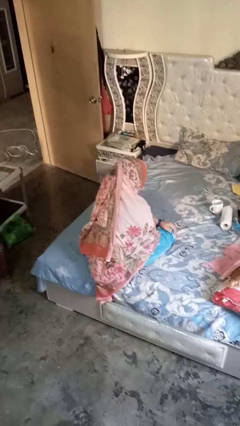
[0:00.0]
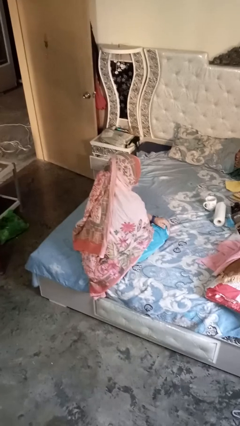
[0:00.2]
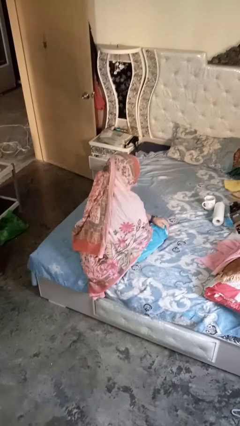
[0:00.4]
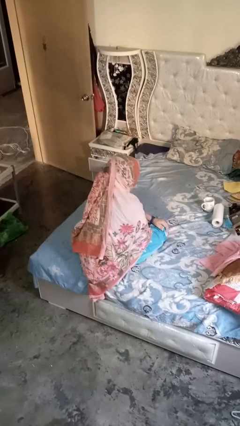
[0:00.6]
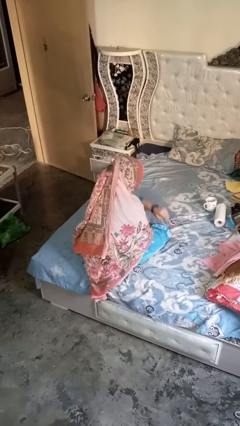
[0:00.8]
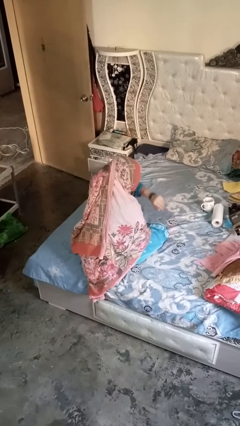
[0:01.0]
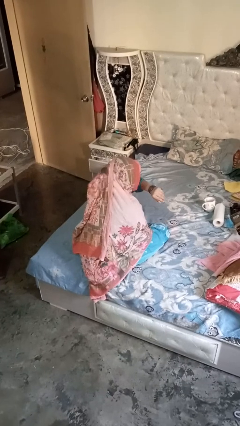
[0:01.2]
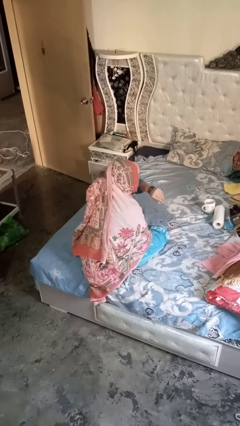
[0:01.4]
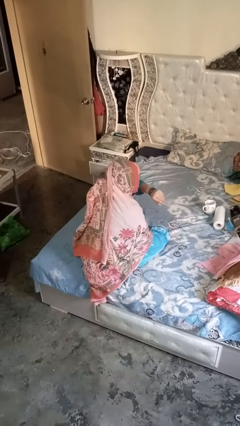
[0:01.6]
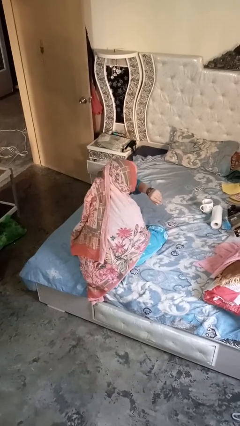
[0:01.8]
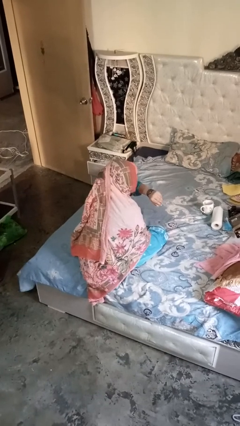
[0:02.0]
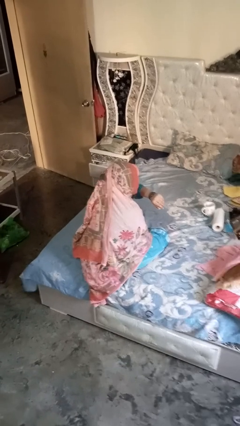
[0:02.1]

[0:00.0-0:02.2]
person gestures watch closely

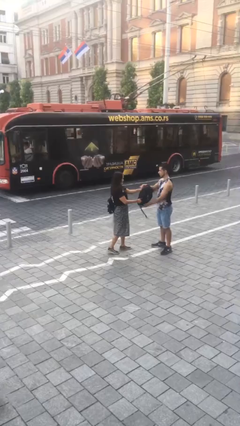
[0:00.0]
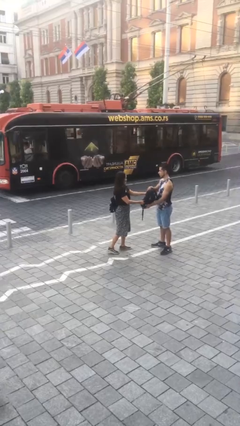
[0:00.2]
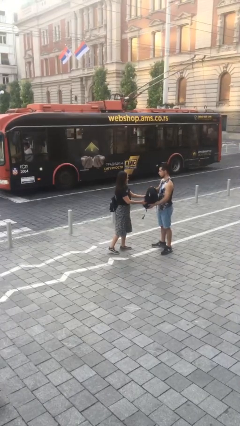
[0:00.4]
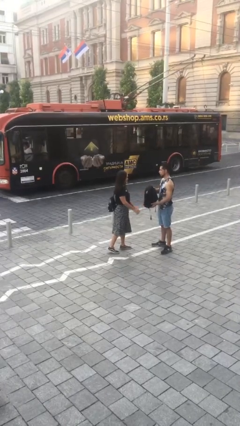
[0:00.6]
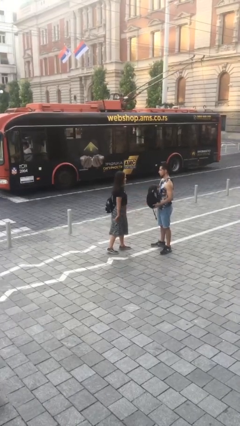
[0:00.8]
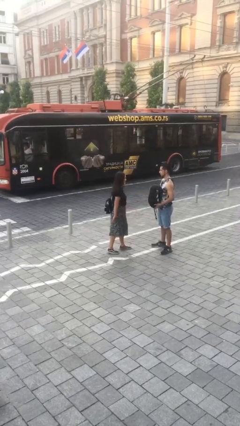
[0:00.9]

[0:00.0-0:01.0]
person transfers object to person

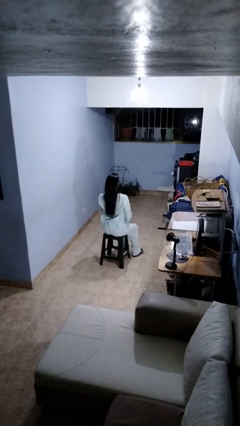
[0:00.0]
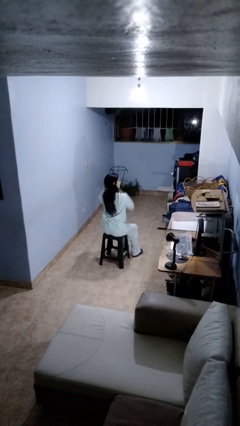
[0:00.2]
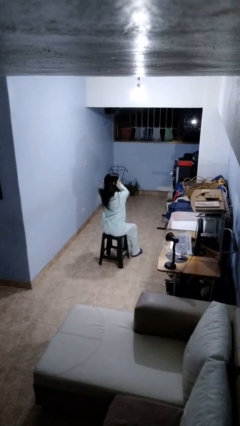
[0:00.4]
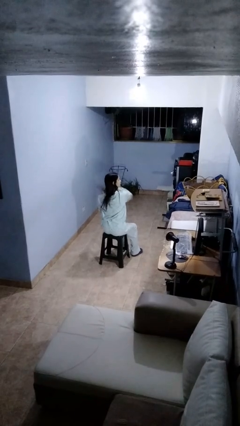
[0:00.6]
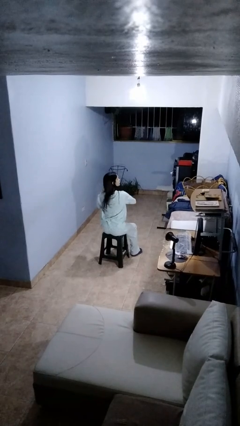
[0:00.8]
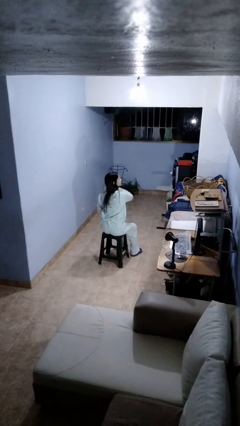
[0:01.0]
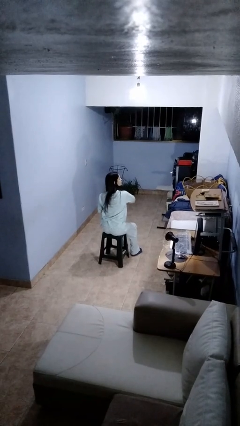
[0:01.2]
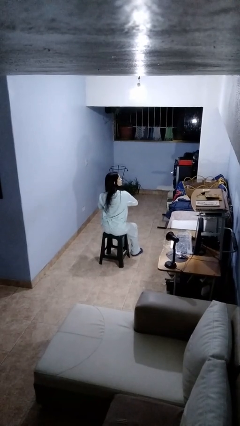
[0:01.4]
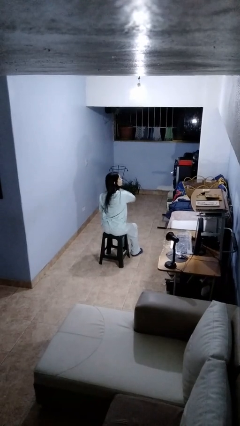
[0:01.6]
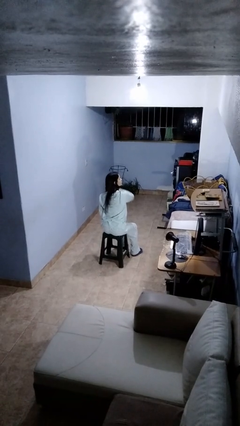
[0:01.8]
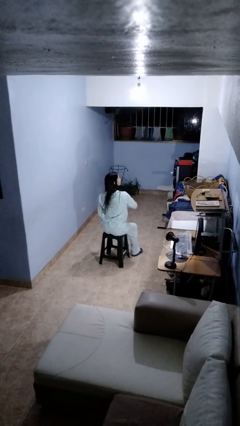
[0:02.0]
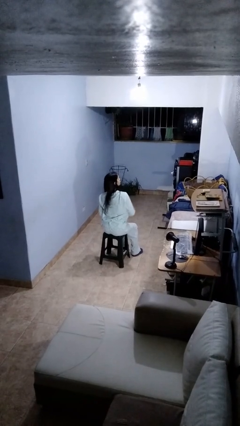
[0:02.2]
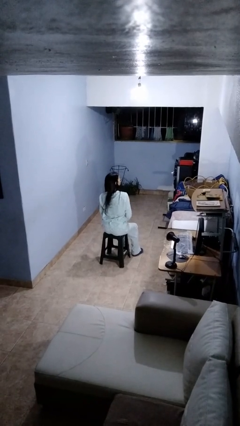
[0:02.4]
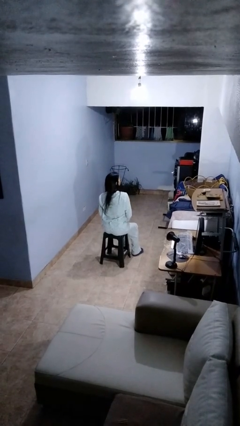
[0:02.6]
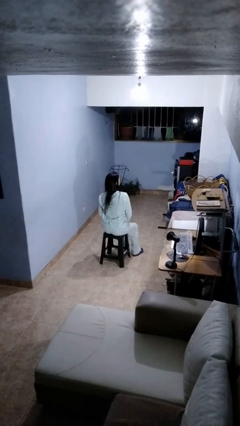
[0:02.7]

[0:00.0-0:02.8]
person brushes hair

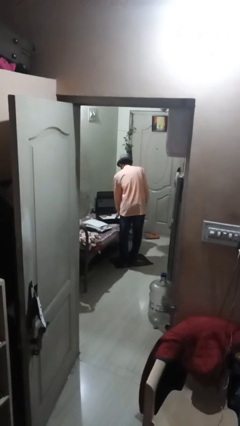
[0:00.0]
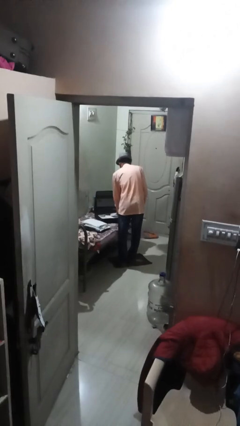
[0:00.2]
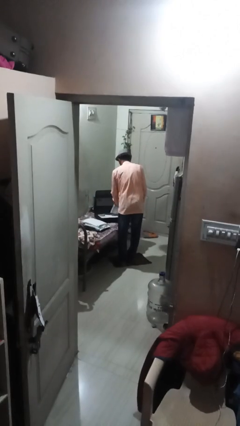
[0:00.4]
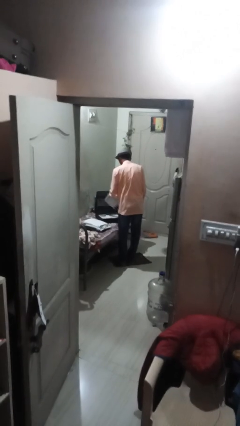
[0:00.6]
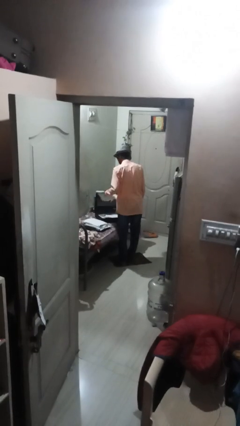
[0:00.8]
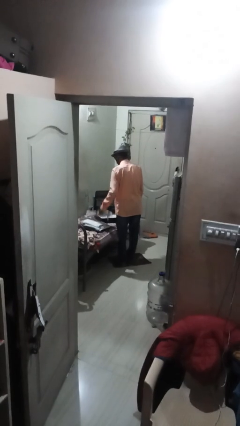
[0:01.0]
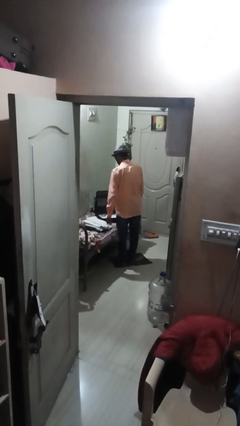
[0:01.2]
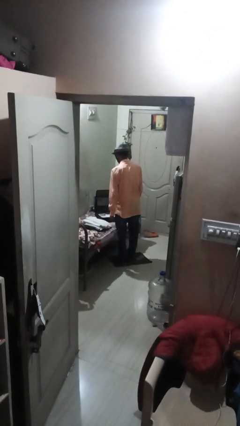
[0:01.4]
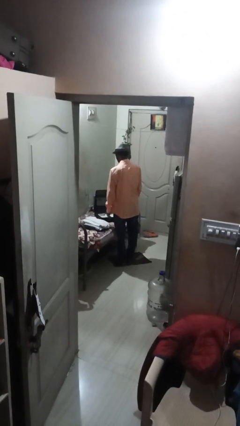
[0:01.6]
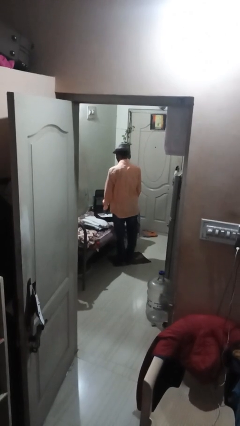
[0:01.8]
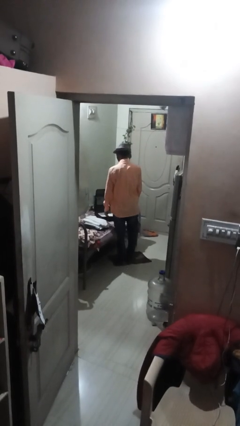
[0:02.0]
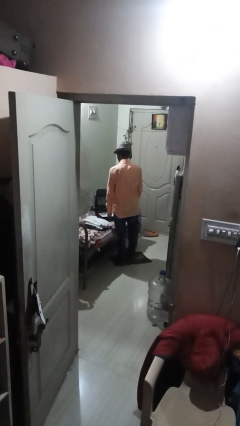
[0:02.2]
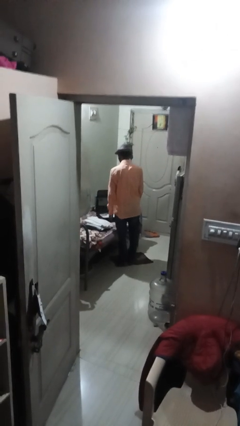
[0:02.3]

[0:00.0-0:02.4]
person unloads clothes from suitcase

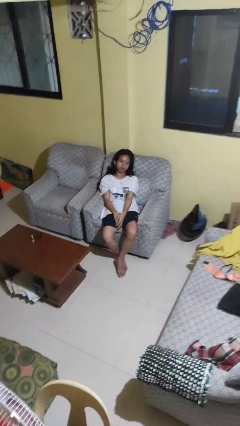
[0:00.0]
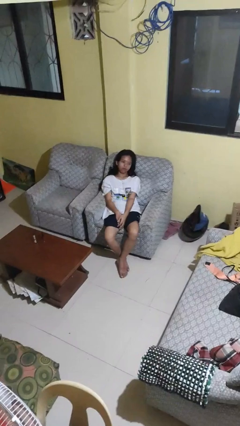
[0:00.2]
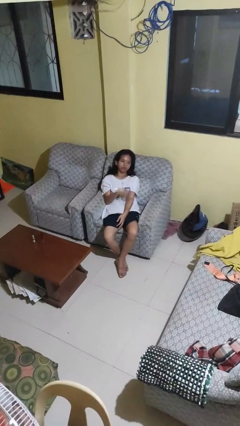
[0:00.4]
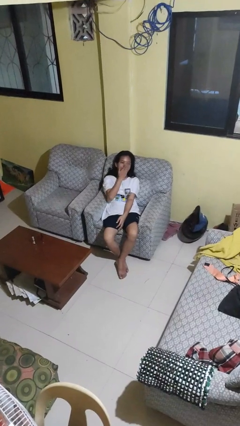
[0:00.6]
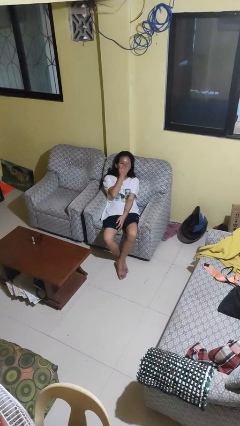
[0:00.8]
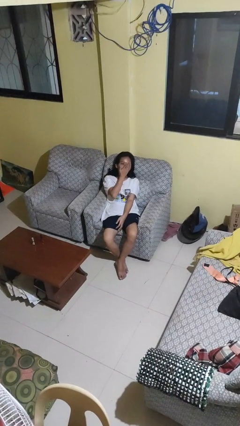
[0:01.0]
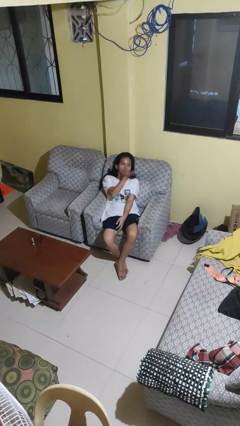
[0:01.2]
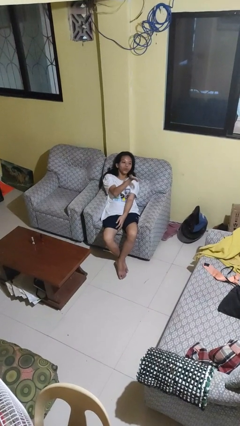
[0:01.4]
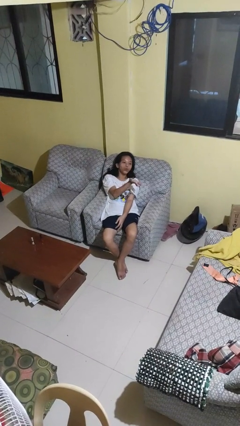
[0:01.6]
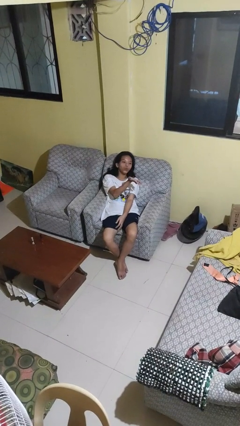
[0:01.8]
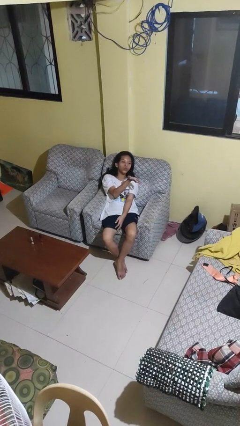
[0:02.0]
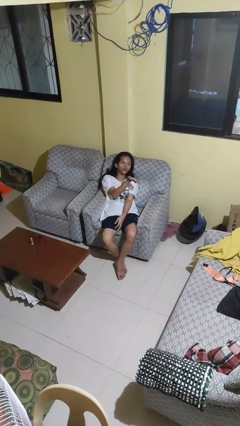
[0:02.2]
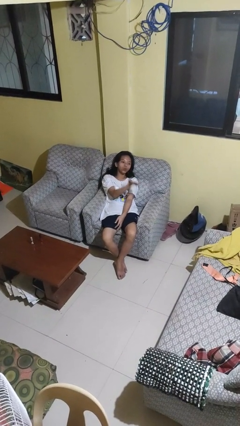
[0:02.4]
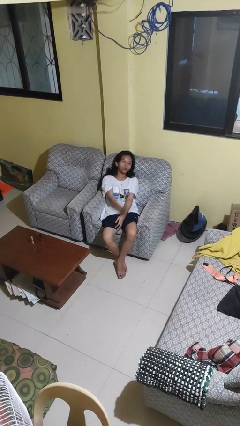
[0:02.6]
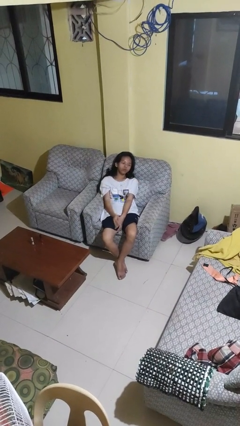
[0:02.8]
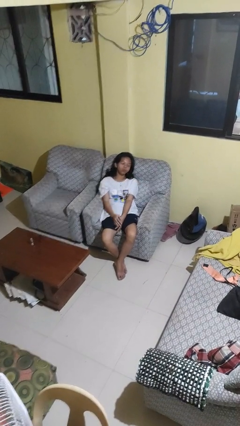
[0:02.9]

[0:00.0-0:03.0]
person gestures blow kiss

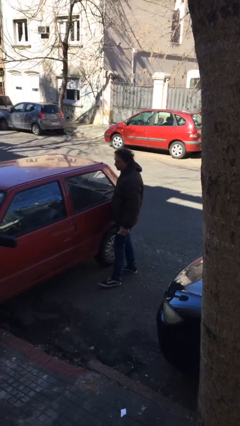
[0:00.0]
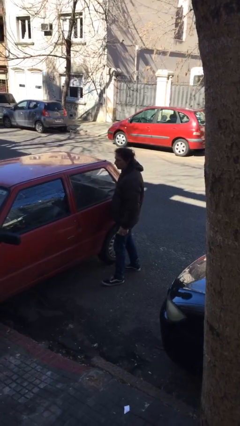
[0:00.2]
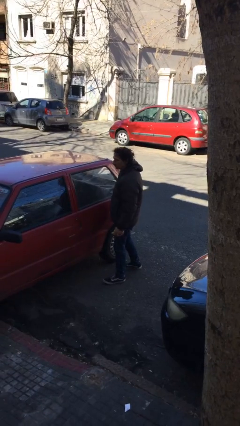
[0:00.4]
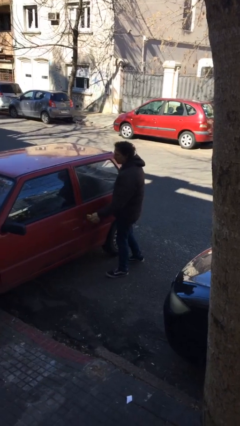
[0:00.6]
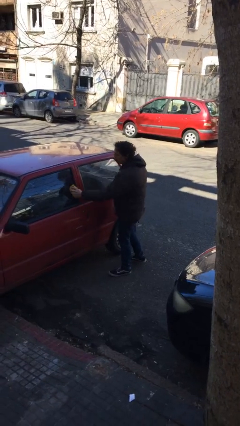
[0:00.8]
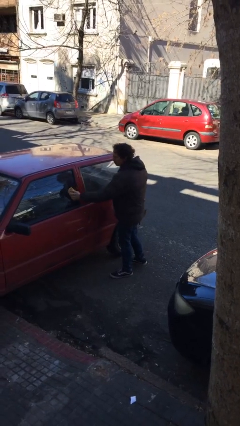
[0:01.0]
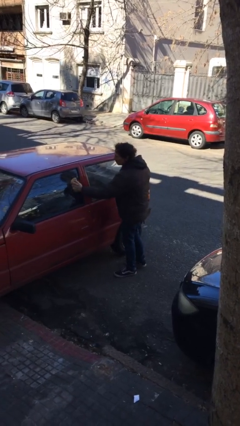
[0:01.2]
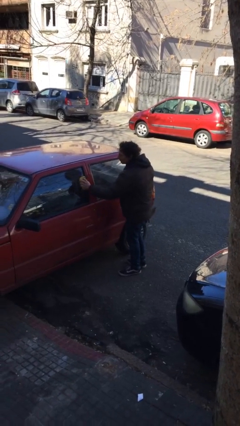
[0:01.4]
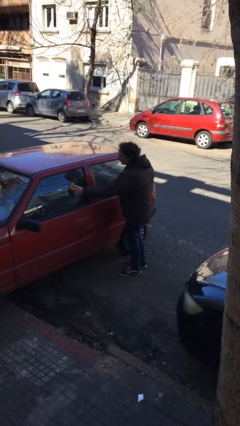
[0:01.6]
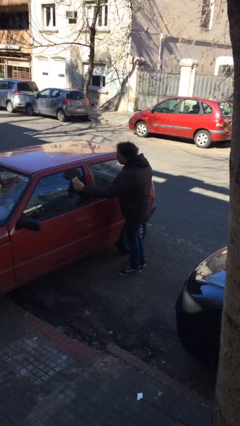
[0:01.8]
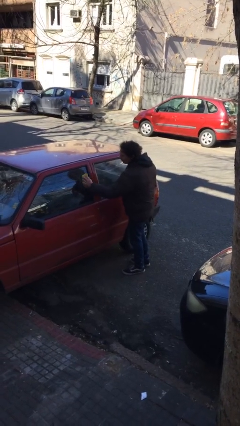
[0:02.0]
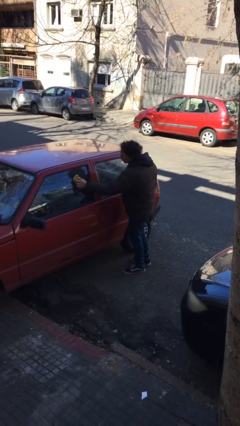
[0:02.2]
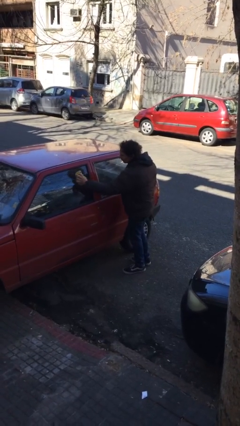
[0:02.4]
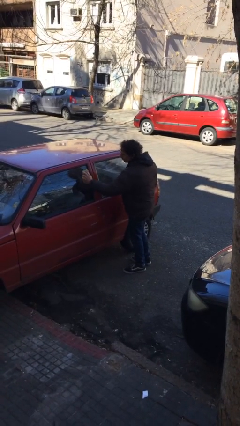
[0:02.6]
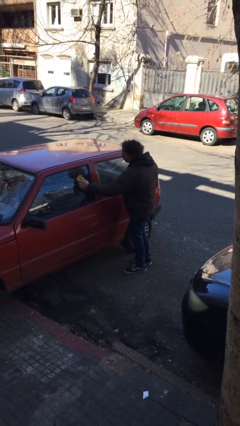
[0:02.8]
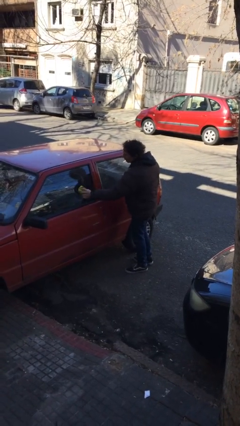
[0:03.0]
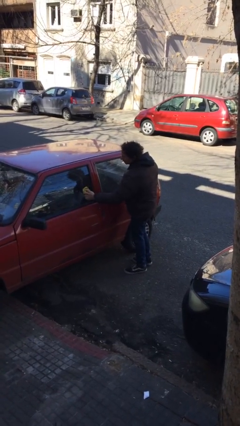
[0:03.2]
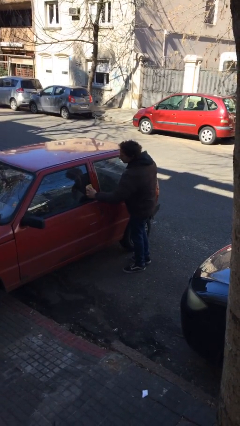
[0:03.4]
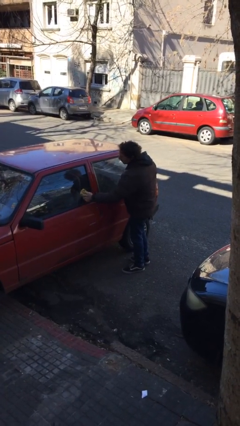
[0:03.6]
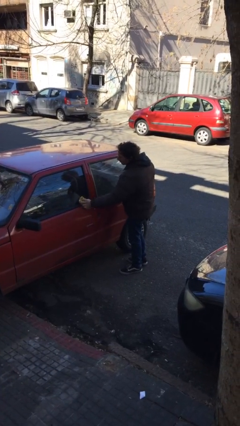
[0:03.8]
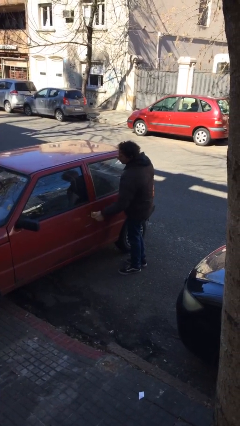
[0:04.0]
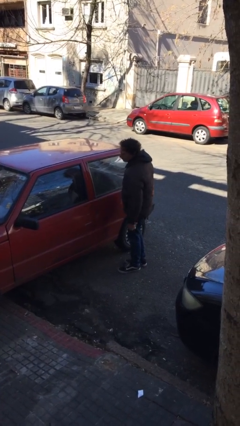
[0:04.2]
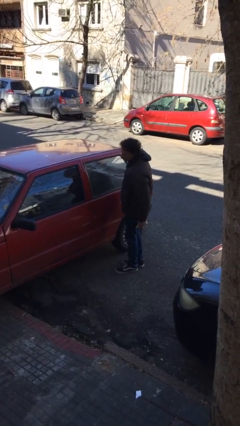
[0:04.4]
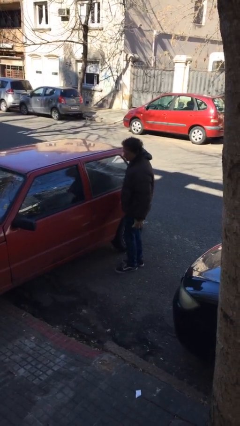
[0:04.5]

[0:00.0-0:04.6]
person polishes car with rag

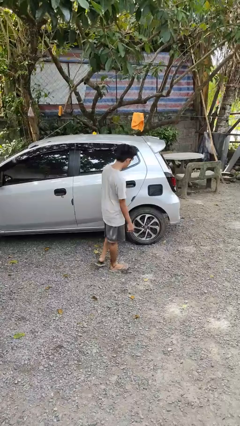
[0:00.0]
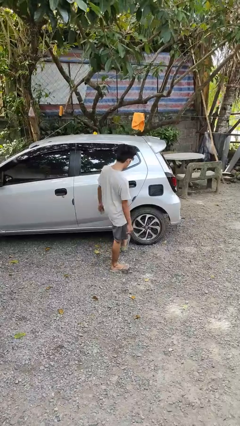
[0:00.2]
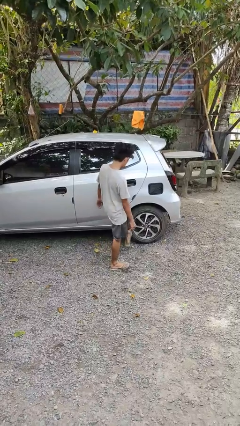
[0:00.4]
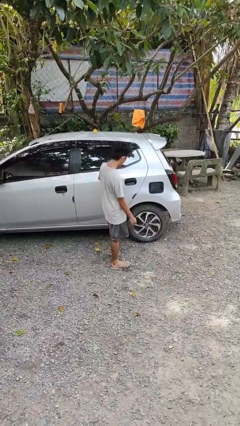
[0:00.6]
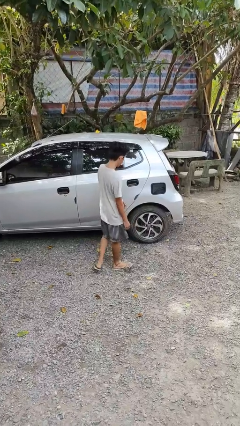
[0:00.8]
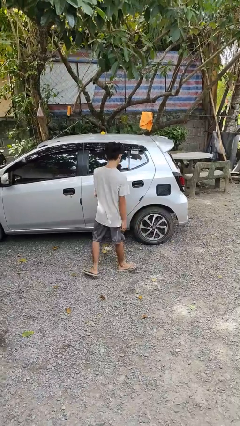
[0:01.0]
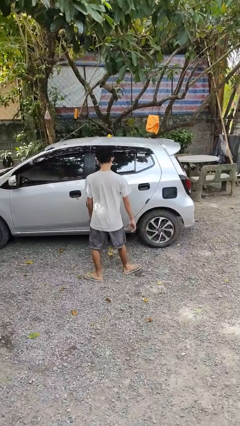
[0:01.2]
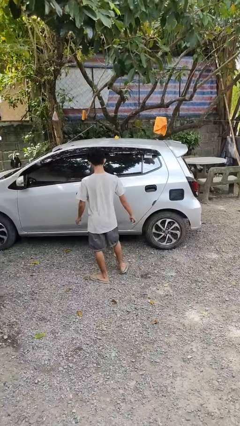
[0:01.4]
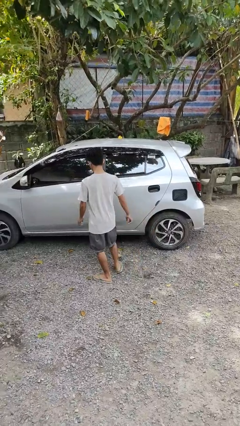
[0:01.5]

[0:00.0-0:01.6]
person kicks car tires
